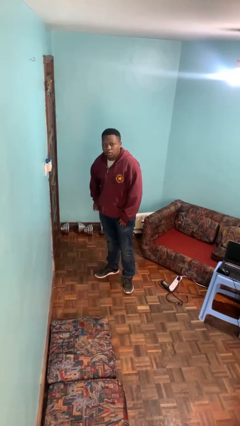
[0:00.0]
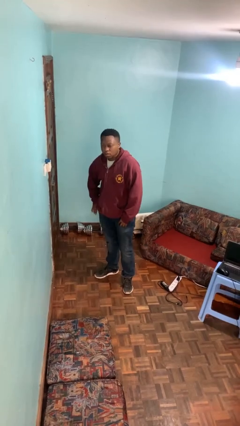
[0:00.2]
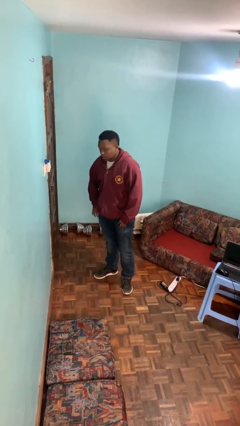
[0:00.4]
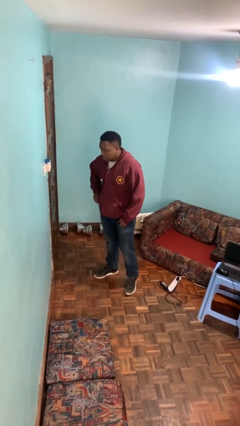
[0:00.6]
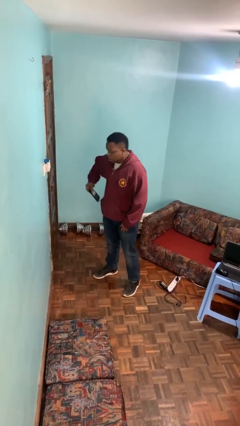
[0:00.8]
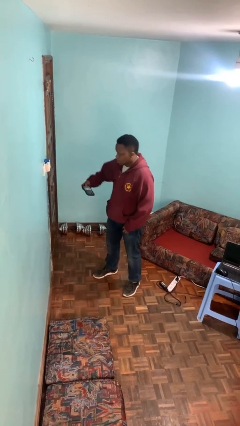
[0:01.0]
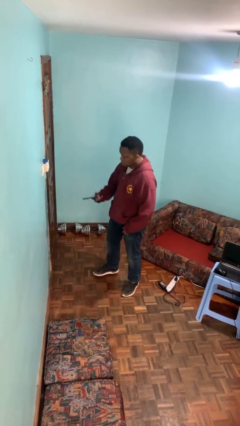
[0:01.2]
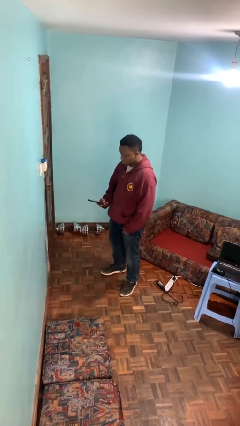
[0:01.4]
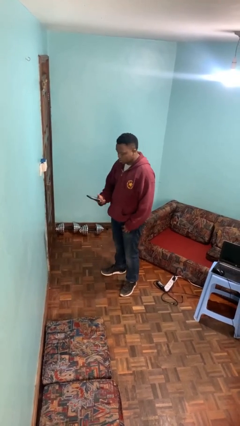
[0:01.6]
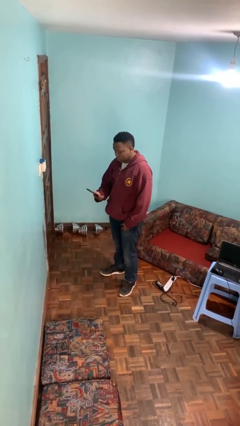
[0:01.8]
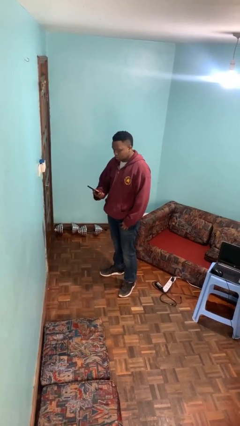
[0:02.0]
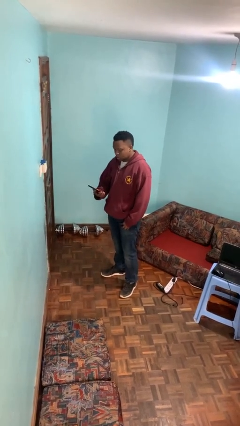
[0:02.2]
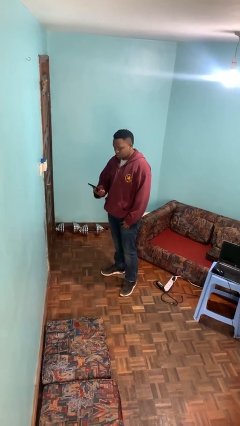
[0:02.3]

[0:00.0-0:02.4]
person takes phone from pocket

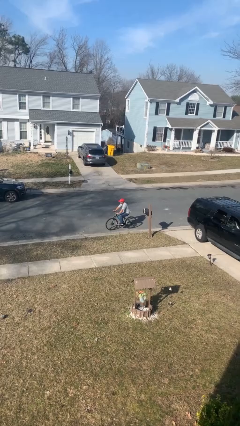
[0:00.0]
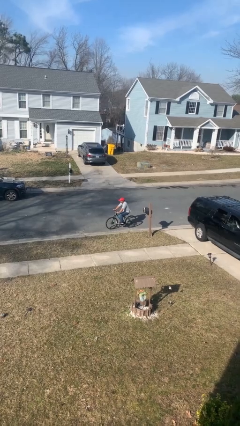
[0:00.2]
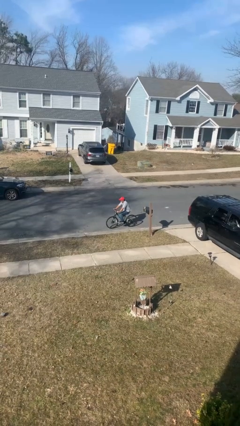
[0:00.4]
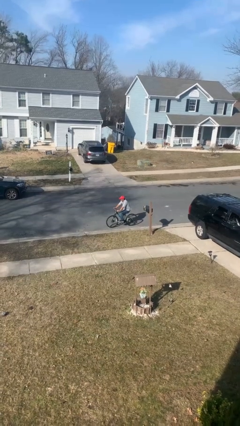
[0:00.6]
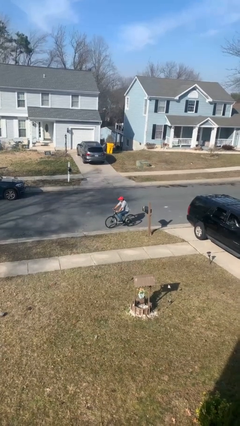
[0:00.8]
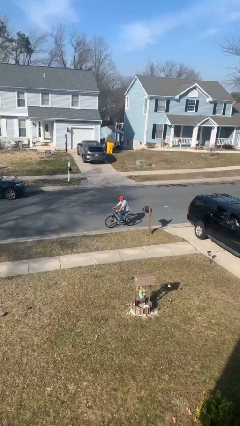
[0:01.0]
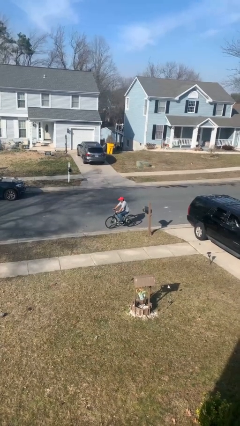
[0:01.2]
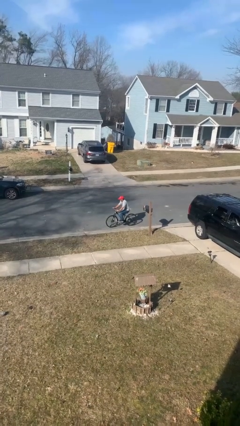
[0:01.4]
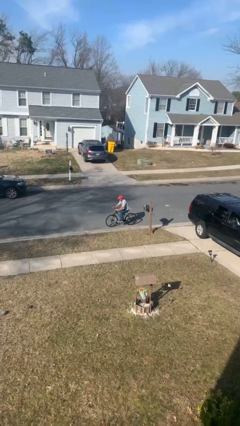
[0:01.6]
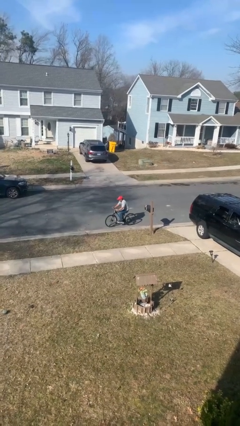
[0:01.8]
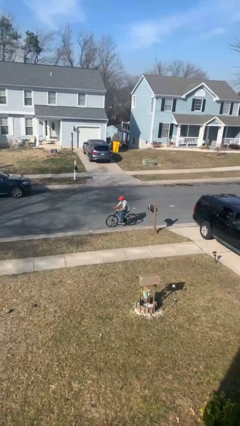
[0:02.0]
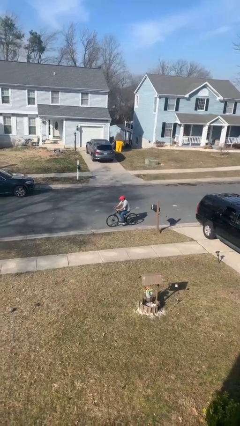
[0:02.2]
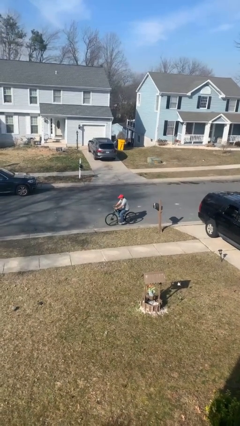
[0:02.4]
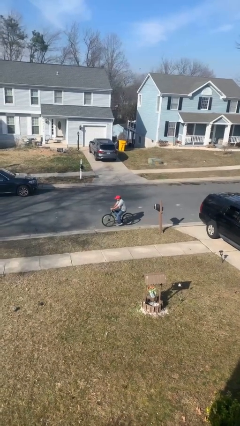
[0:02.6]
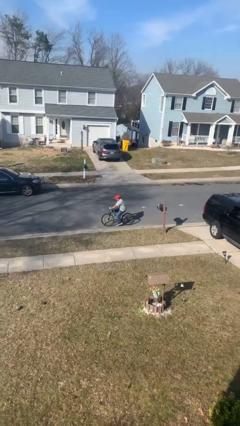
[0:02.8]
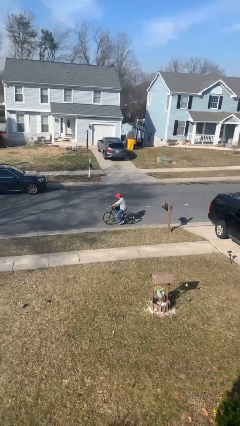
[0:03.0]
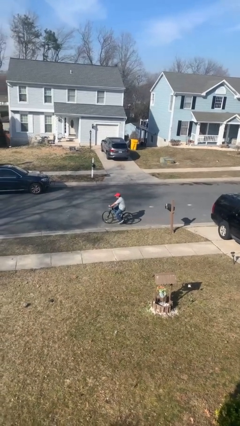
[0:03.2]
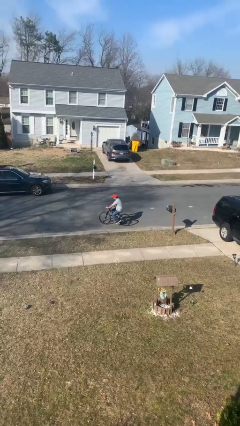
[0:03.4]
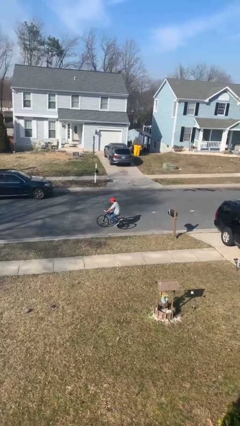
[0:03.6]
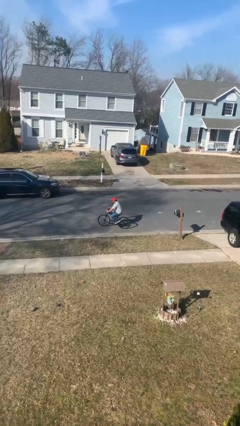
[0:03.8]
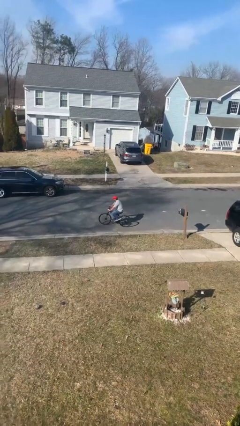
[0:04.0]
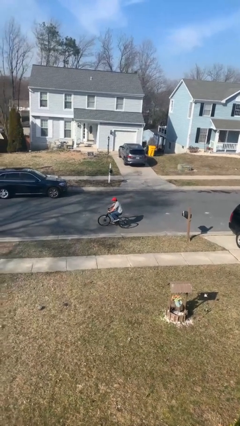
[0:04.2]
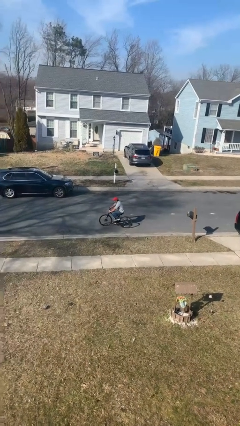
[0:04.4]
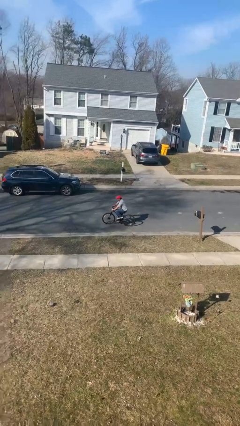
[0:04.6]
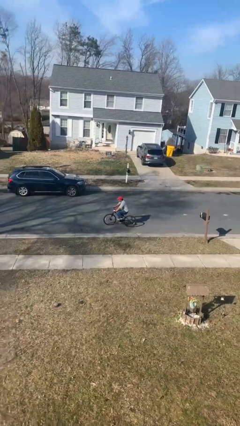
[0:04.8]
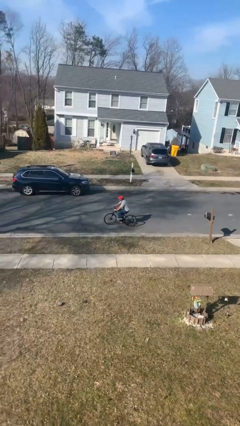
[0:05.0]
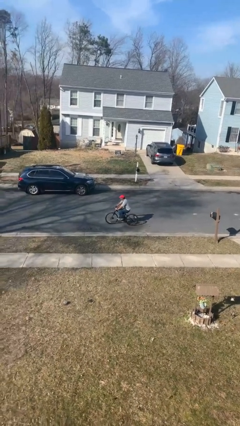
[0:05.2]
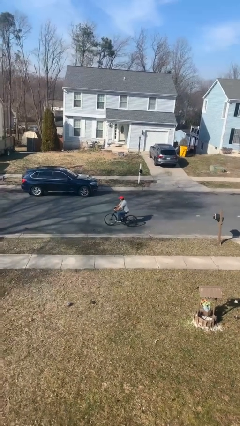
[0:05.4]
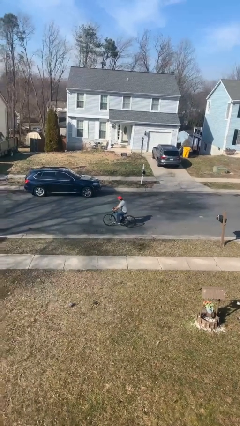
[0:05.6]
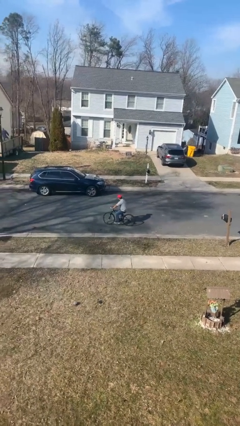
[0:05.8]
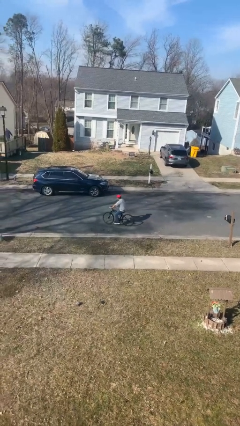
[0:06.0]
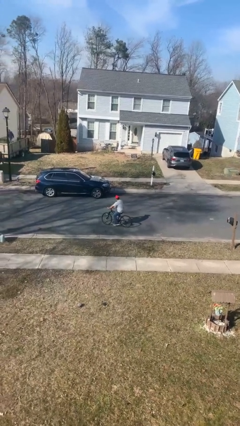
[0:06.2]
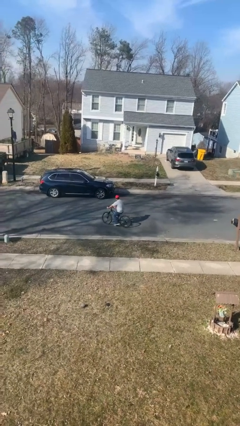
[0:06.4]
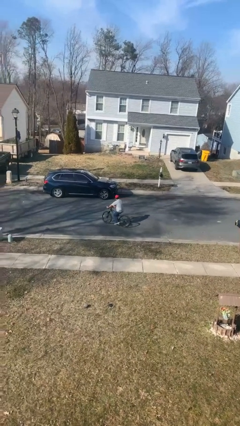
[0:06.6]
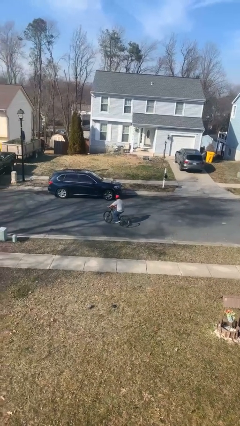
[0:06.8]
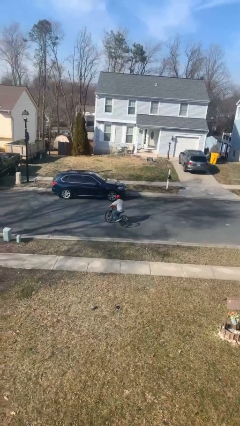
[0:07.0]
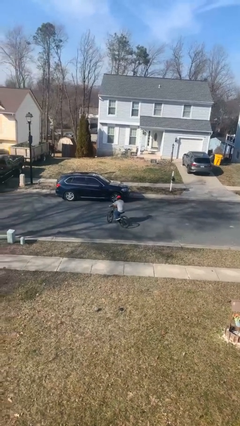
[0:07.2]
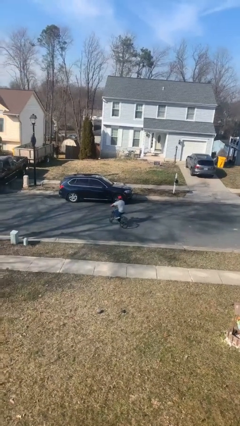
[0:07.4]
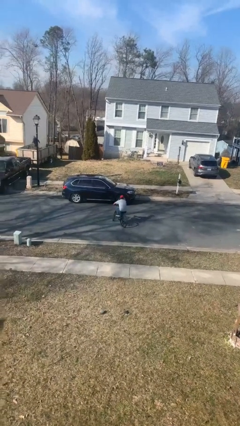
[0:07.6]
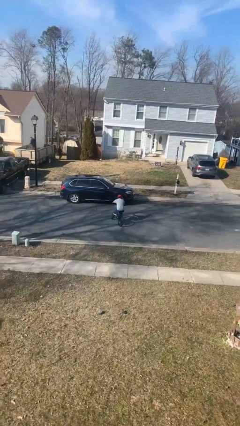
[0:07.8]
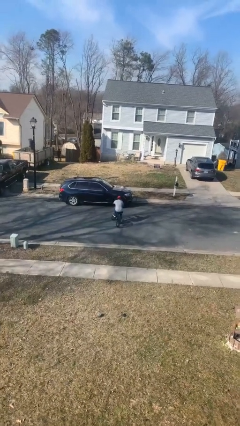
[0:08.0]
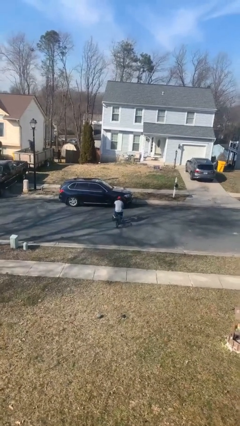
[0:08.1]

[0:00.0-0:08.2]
person rides bicycle

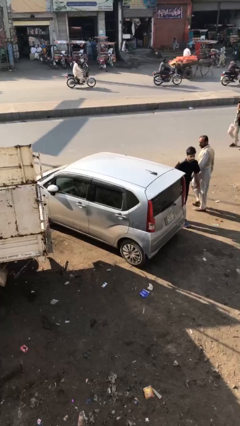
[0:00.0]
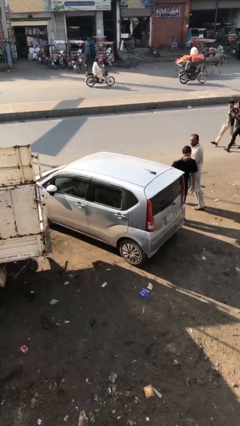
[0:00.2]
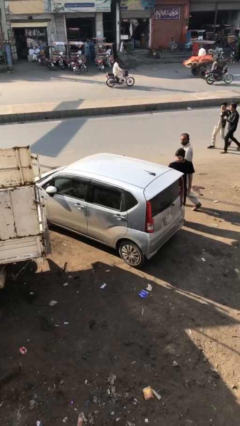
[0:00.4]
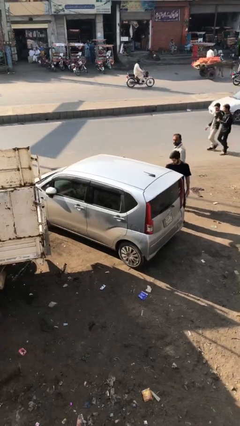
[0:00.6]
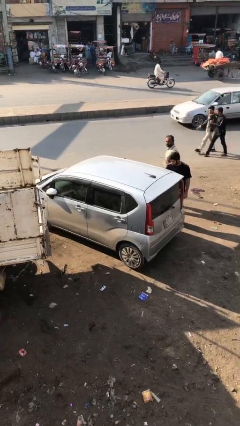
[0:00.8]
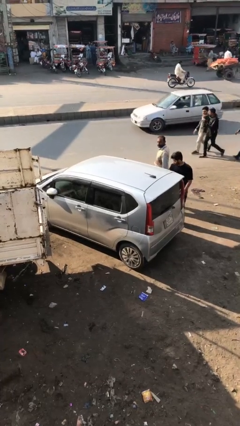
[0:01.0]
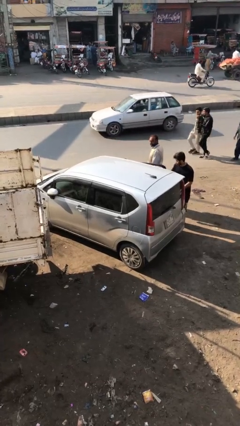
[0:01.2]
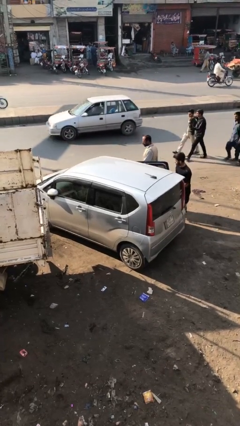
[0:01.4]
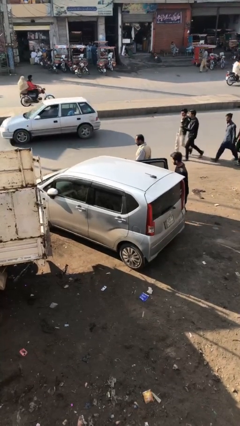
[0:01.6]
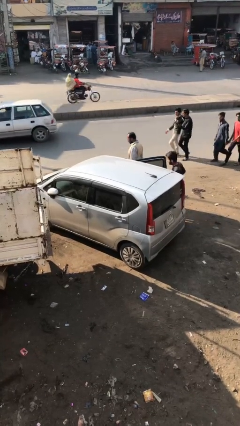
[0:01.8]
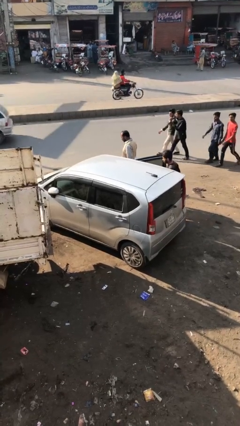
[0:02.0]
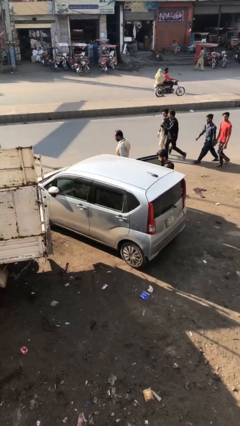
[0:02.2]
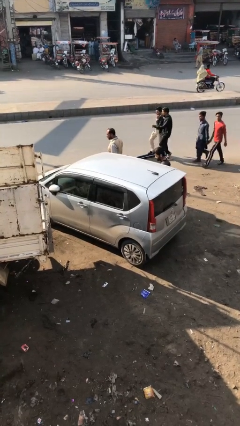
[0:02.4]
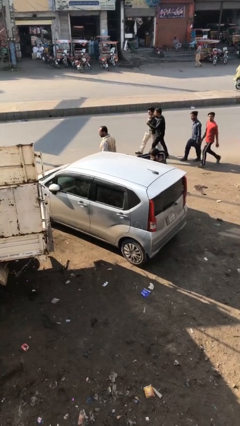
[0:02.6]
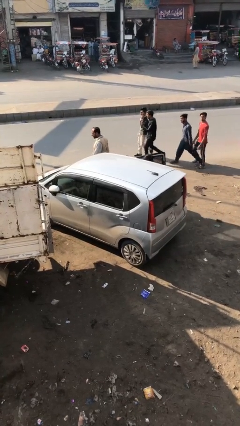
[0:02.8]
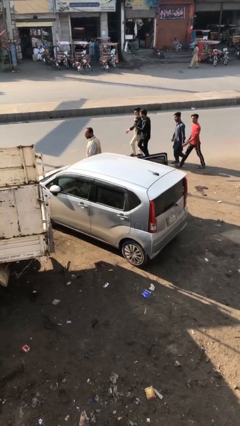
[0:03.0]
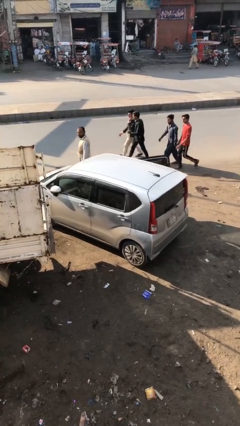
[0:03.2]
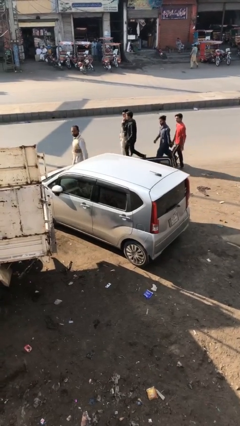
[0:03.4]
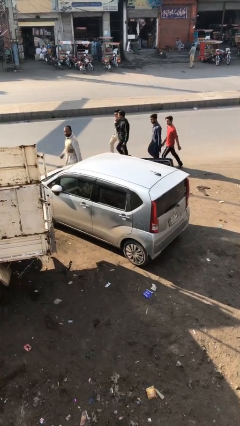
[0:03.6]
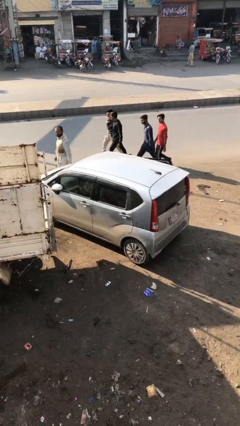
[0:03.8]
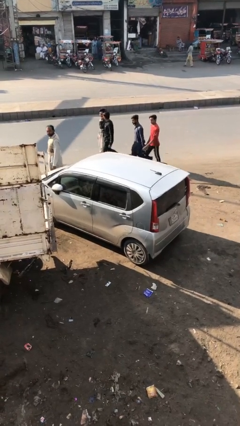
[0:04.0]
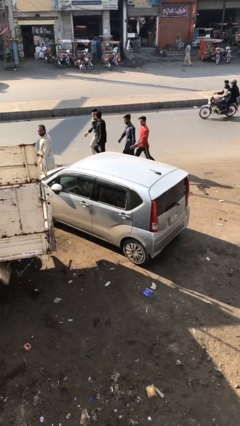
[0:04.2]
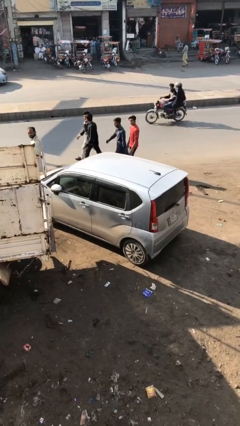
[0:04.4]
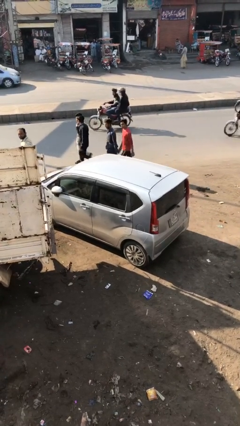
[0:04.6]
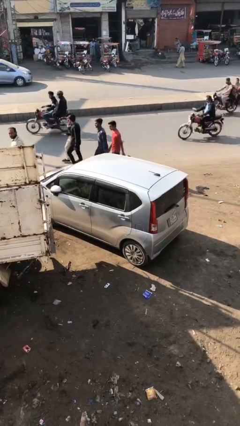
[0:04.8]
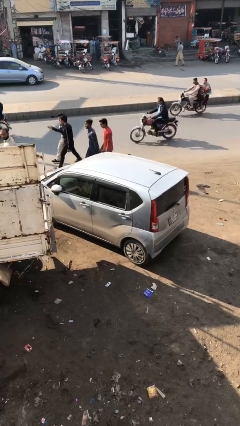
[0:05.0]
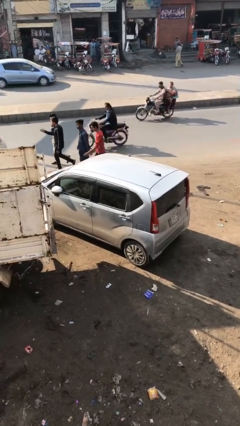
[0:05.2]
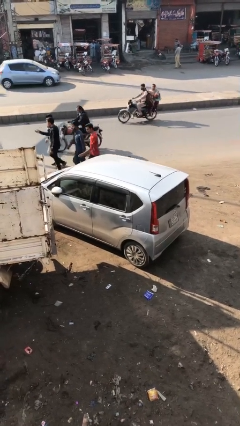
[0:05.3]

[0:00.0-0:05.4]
car picks up person

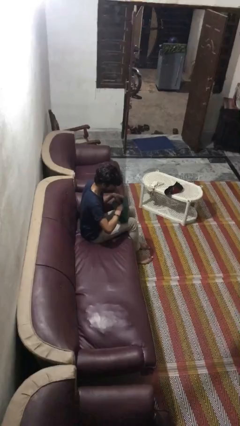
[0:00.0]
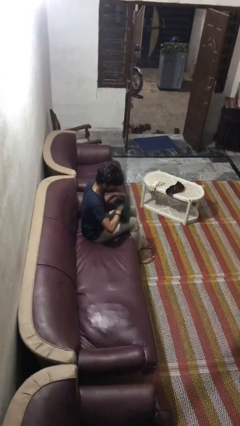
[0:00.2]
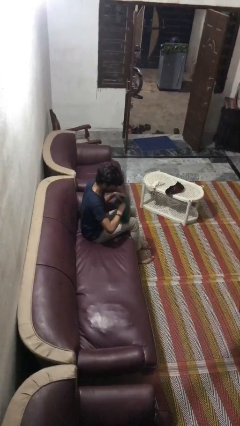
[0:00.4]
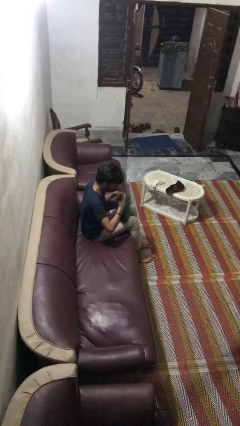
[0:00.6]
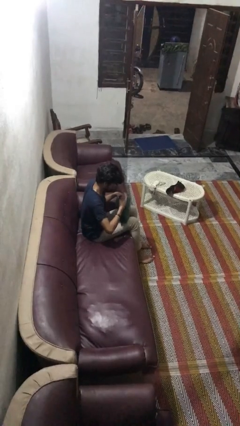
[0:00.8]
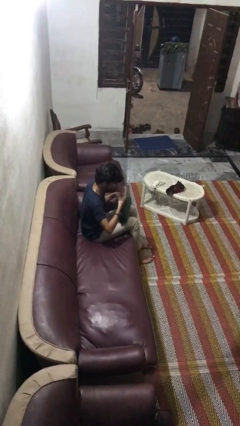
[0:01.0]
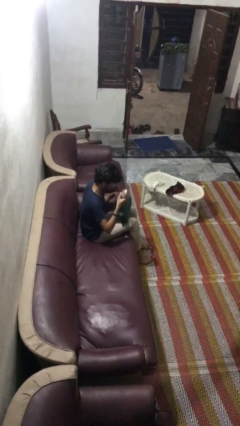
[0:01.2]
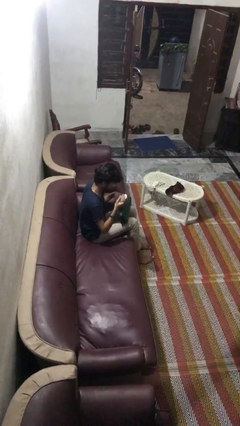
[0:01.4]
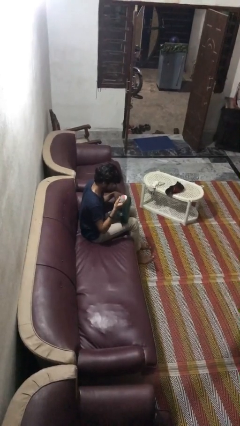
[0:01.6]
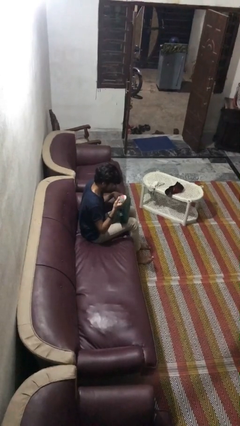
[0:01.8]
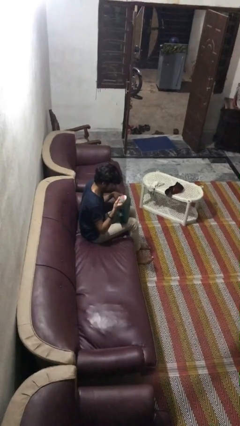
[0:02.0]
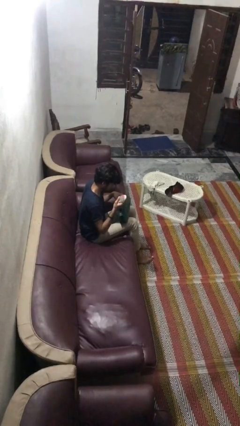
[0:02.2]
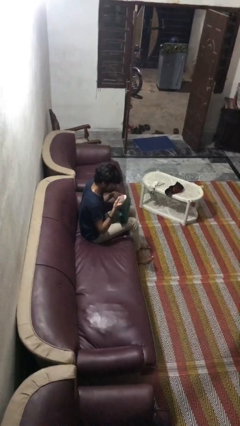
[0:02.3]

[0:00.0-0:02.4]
person takes object from purse
